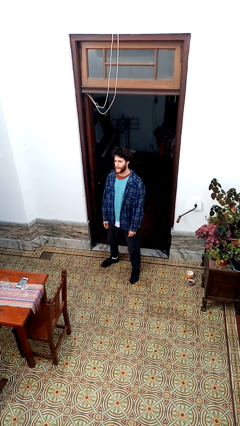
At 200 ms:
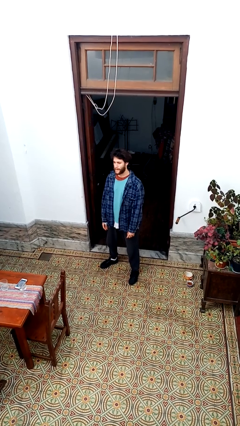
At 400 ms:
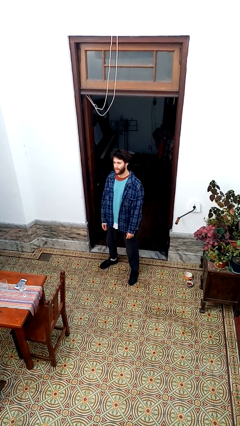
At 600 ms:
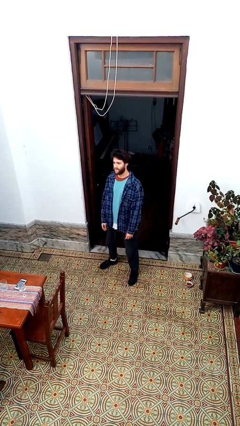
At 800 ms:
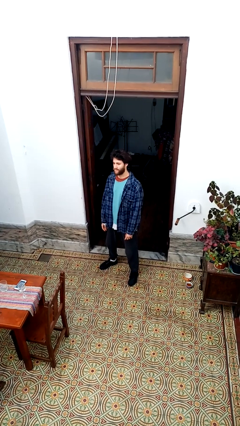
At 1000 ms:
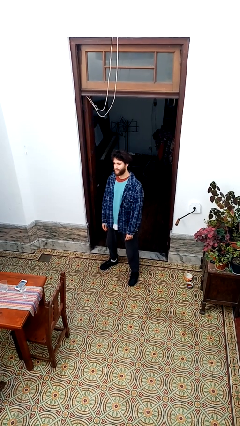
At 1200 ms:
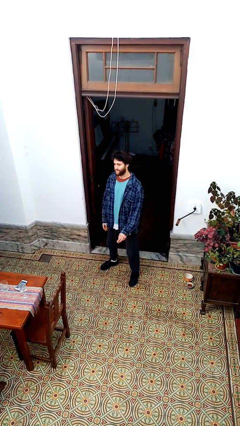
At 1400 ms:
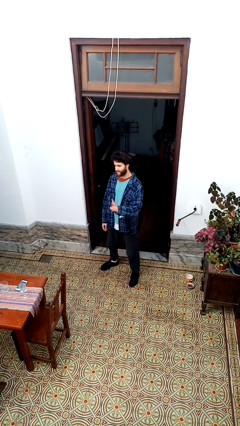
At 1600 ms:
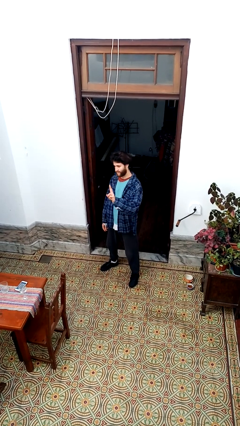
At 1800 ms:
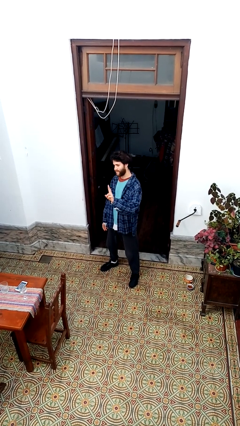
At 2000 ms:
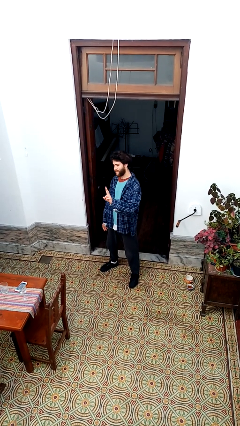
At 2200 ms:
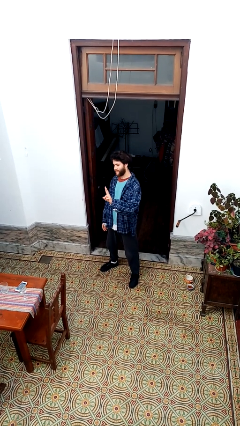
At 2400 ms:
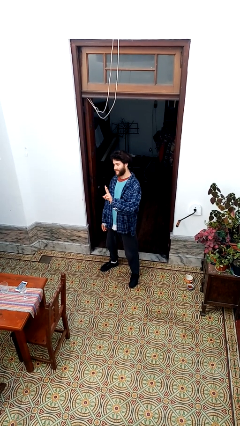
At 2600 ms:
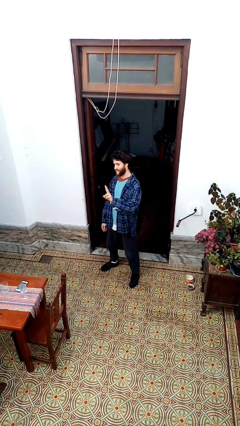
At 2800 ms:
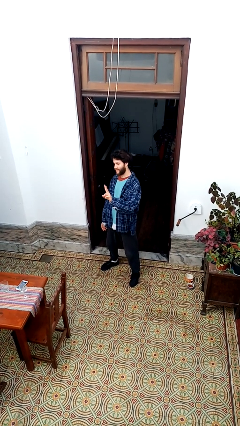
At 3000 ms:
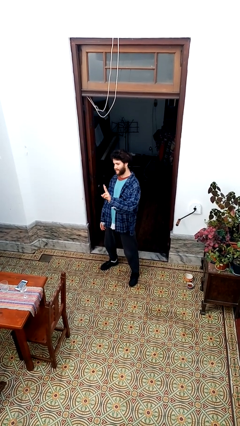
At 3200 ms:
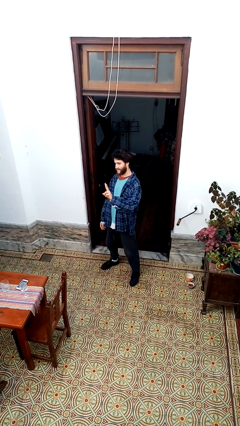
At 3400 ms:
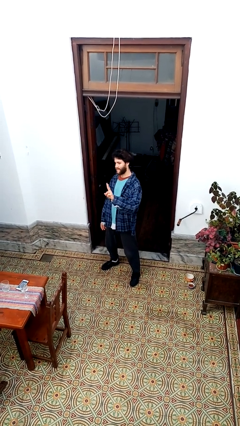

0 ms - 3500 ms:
person gestures peace

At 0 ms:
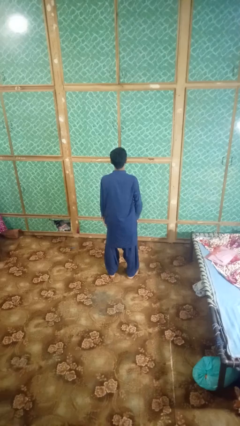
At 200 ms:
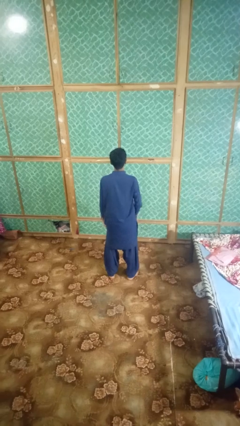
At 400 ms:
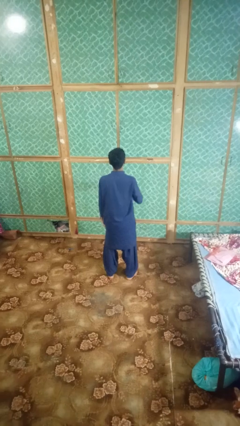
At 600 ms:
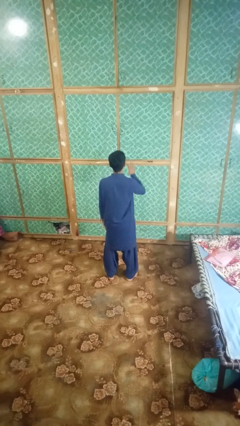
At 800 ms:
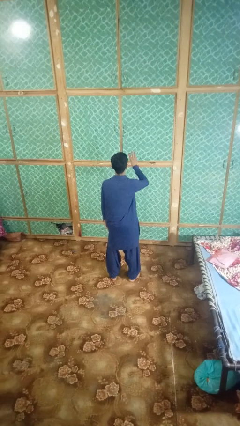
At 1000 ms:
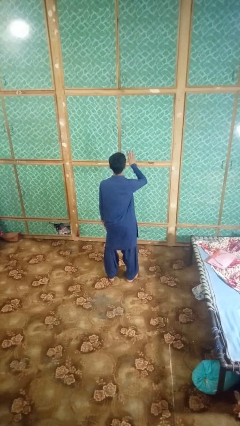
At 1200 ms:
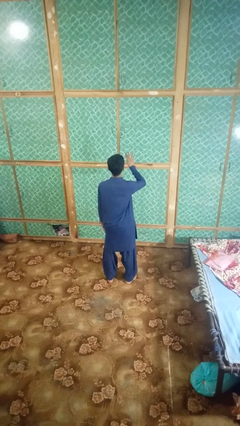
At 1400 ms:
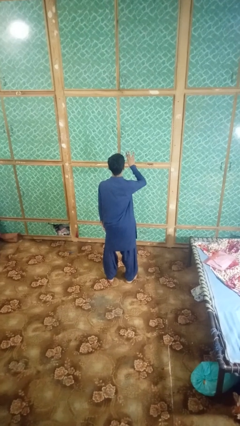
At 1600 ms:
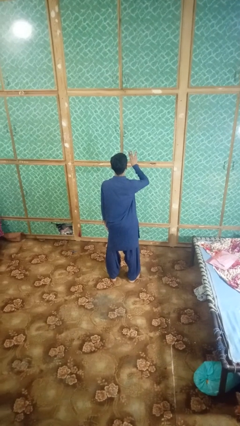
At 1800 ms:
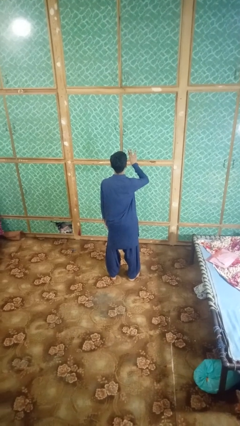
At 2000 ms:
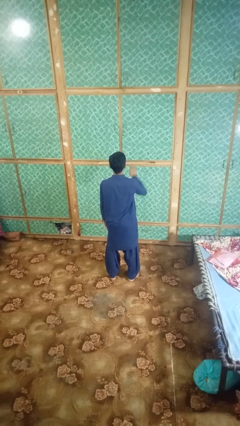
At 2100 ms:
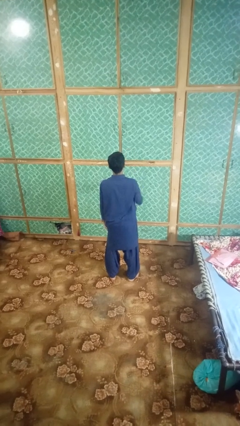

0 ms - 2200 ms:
person gestures number three

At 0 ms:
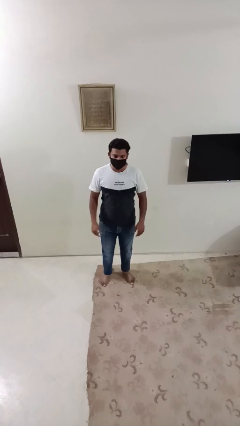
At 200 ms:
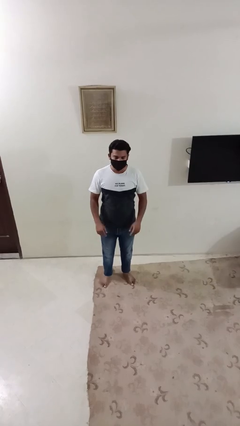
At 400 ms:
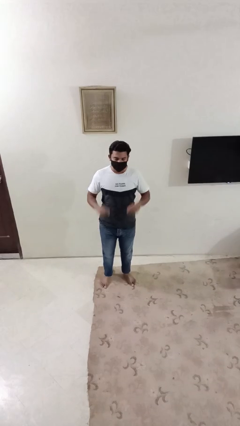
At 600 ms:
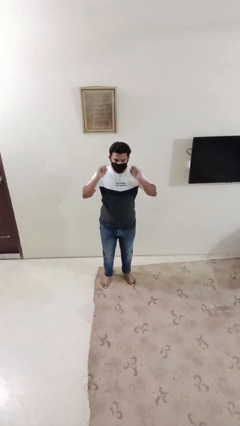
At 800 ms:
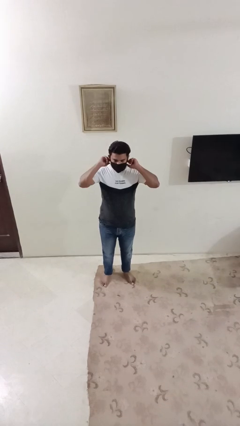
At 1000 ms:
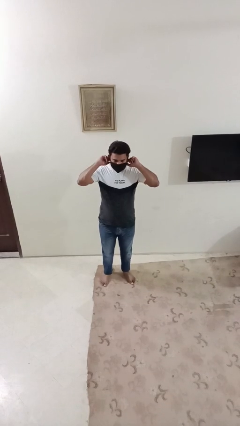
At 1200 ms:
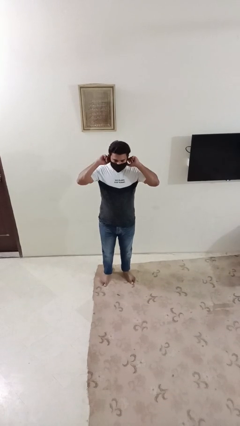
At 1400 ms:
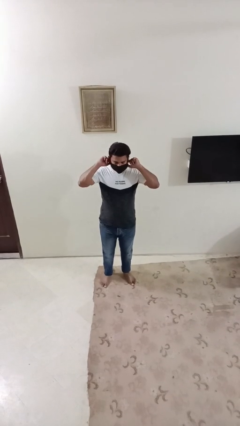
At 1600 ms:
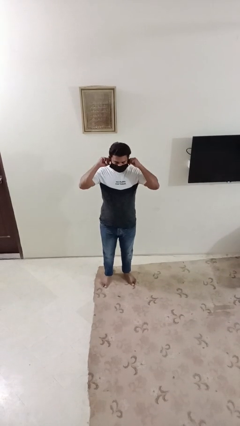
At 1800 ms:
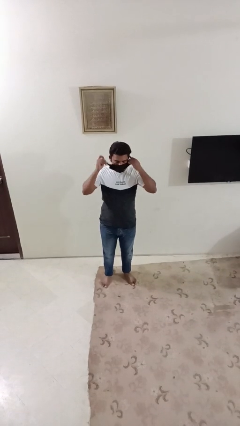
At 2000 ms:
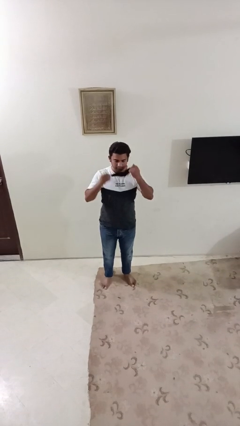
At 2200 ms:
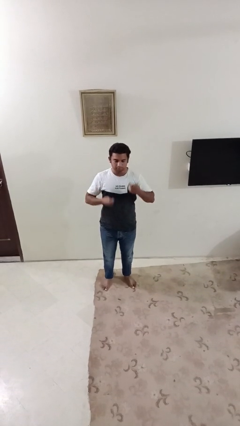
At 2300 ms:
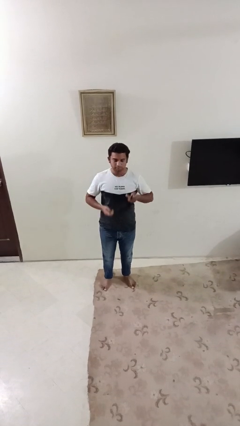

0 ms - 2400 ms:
person takes off facemask

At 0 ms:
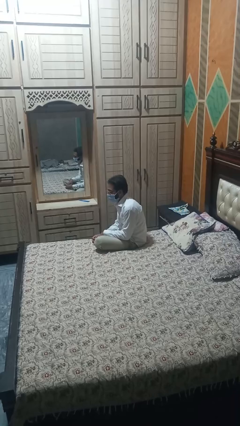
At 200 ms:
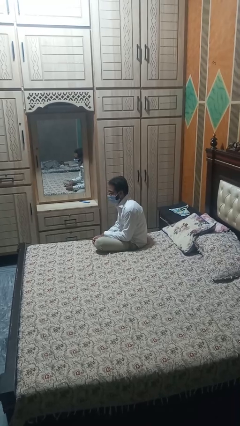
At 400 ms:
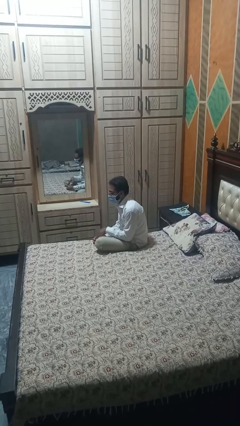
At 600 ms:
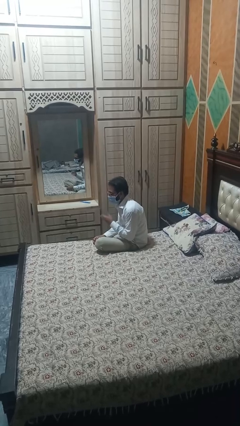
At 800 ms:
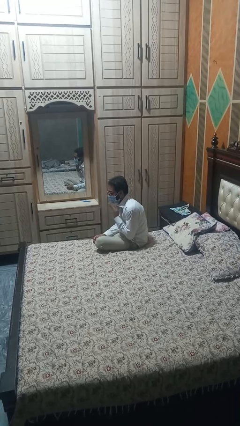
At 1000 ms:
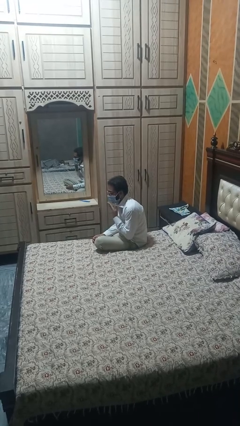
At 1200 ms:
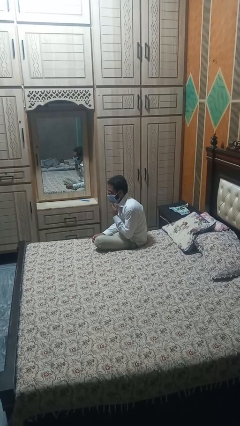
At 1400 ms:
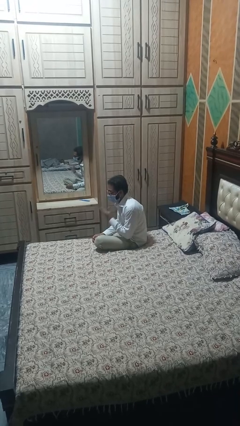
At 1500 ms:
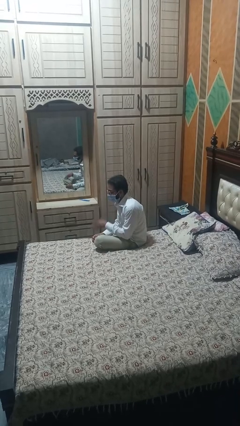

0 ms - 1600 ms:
person strokes chin

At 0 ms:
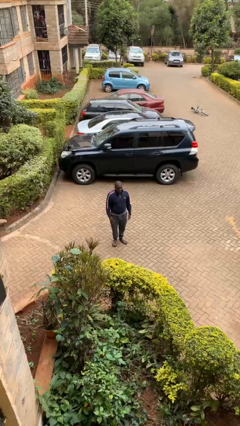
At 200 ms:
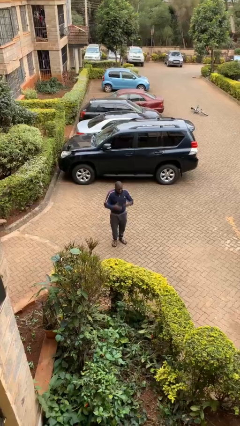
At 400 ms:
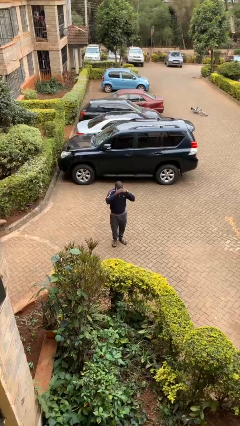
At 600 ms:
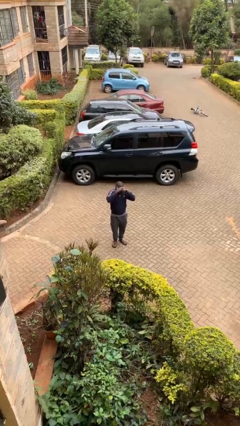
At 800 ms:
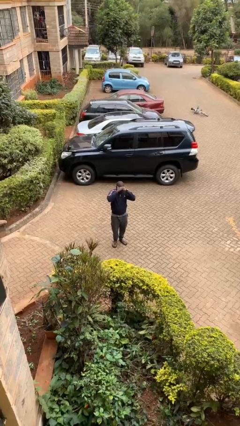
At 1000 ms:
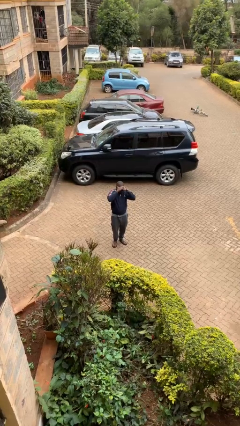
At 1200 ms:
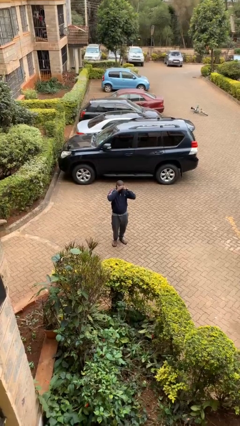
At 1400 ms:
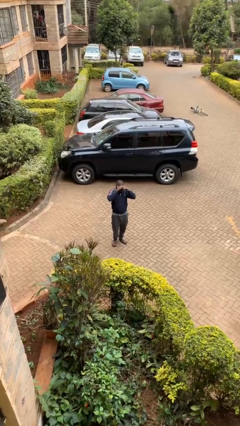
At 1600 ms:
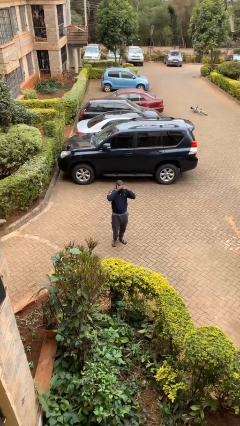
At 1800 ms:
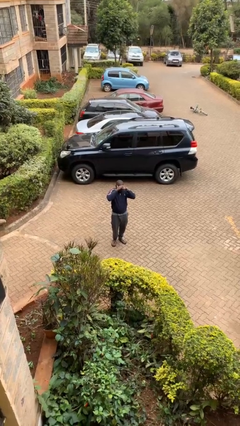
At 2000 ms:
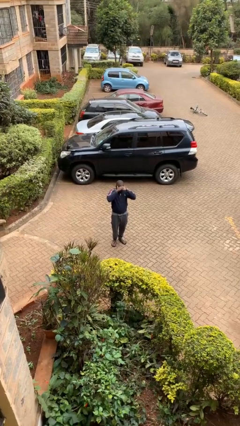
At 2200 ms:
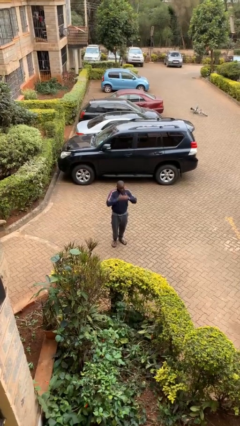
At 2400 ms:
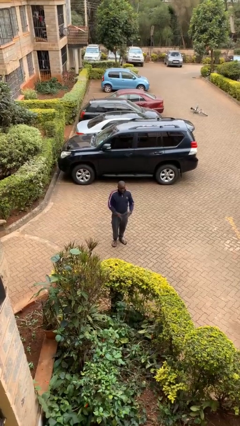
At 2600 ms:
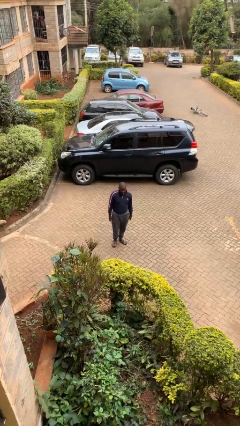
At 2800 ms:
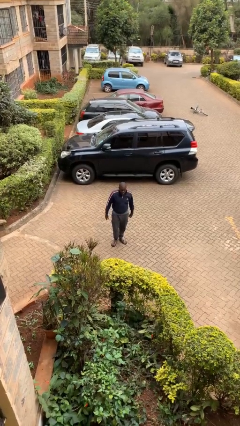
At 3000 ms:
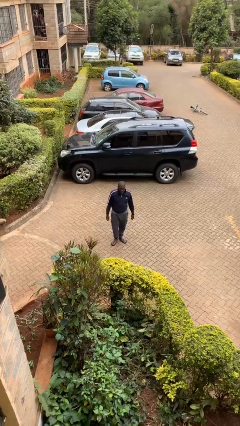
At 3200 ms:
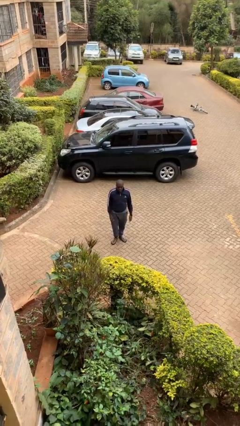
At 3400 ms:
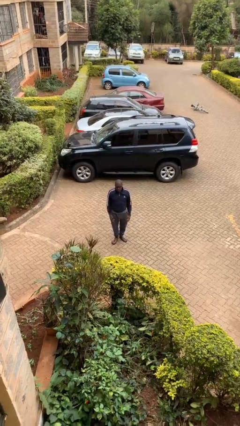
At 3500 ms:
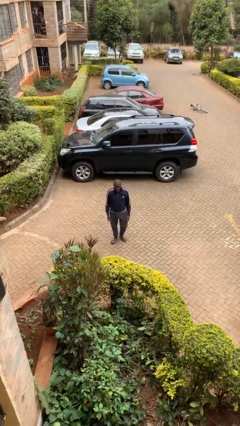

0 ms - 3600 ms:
person shades eyes

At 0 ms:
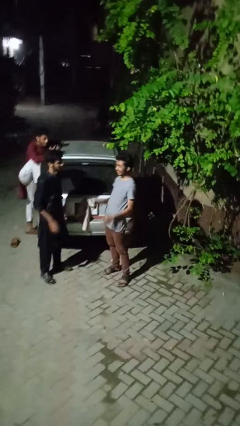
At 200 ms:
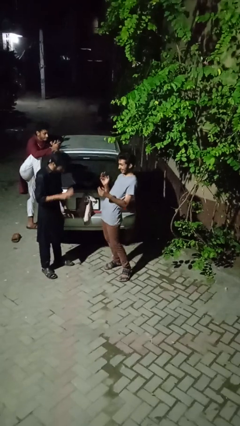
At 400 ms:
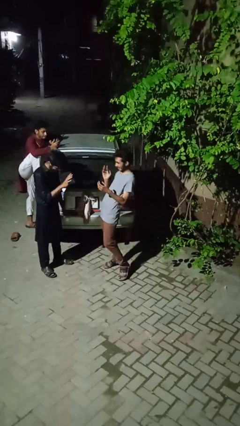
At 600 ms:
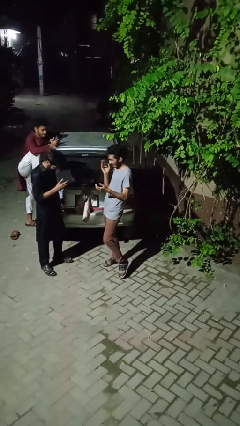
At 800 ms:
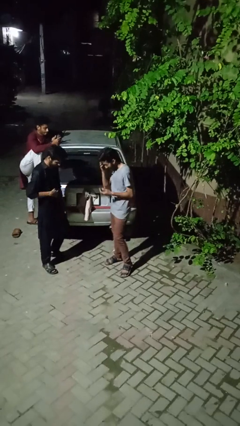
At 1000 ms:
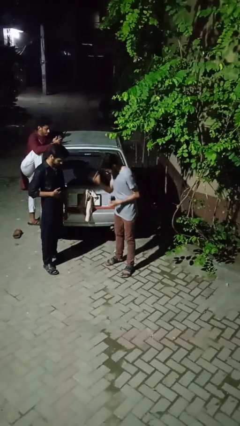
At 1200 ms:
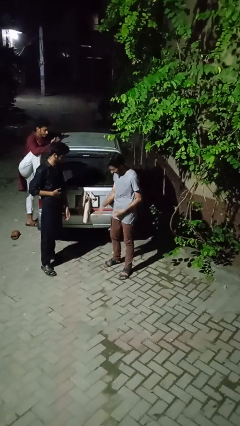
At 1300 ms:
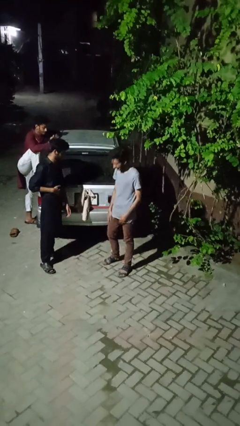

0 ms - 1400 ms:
person laughs with person

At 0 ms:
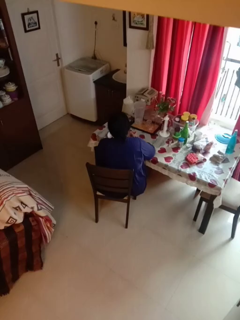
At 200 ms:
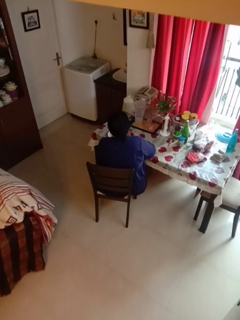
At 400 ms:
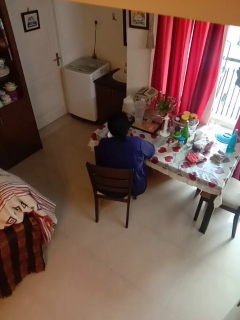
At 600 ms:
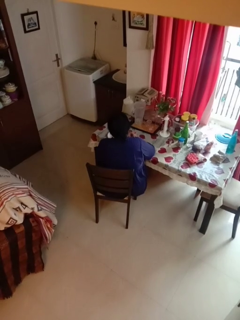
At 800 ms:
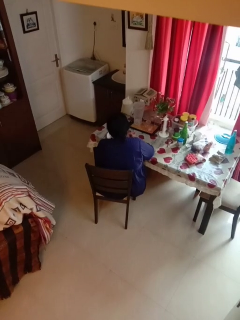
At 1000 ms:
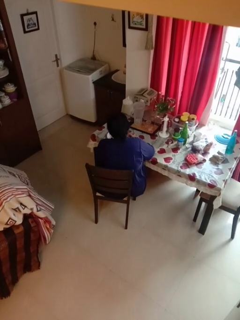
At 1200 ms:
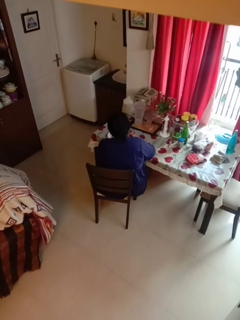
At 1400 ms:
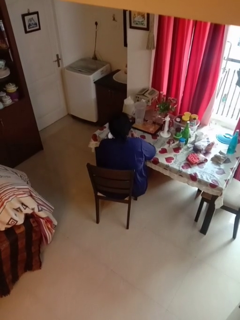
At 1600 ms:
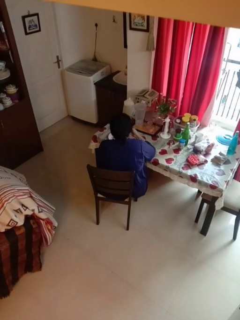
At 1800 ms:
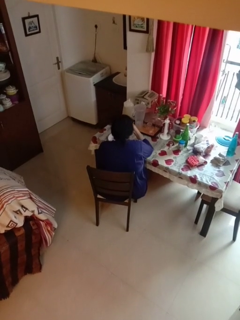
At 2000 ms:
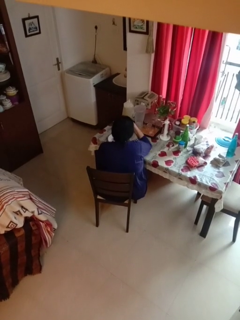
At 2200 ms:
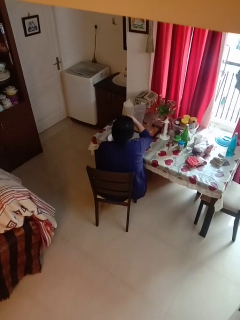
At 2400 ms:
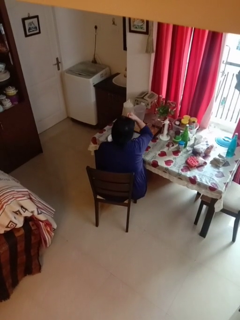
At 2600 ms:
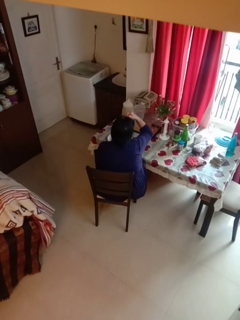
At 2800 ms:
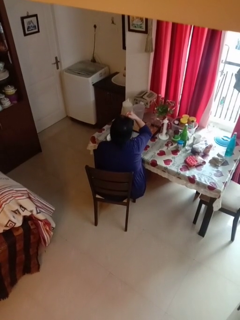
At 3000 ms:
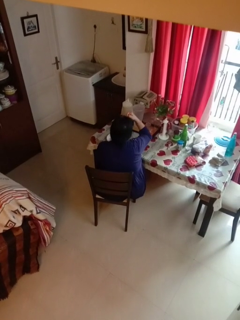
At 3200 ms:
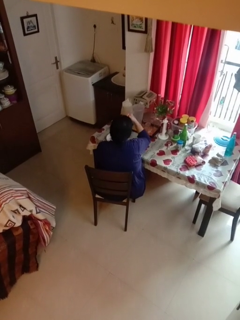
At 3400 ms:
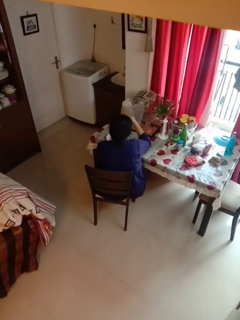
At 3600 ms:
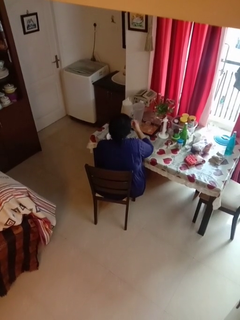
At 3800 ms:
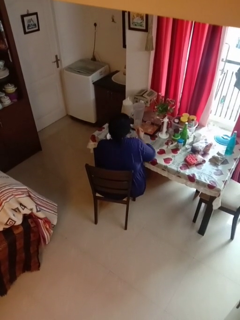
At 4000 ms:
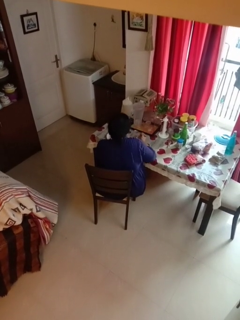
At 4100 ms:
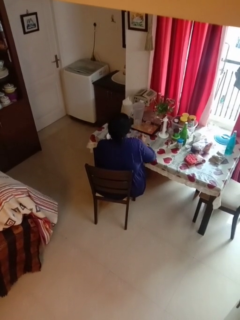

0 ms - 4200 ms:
person eats with utensil
